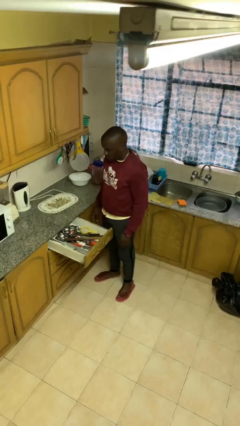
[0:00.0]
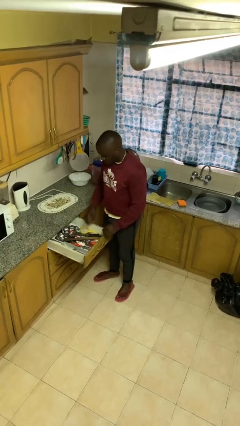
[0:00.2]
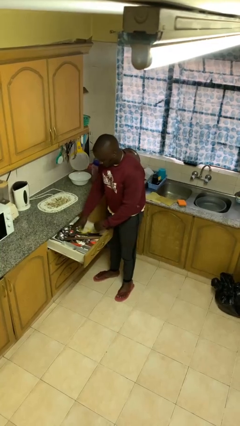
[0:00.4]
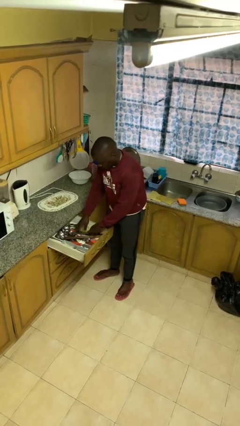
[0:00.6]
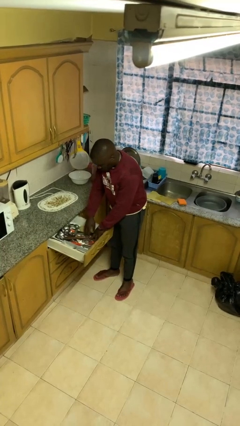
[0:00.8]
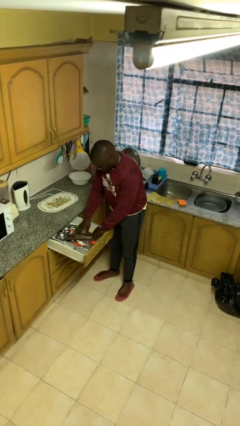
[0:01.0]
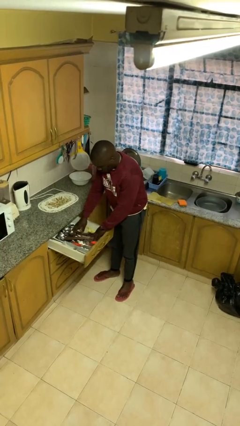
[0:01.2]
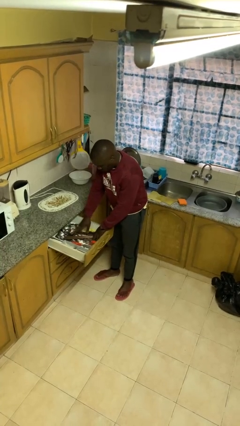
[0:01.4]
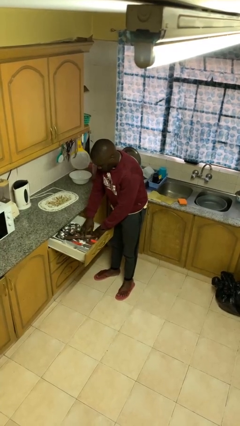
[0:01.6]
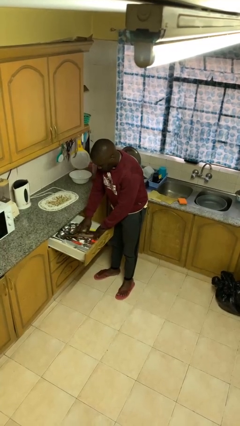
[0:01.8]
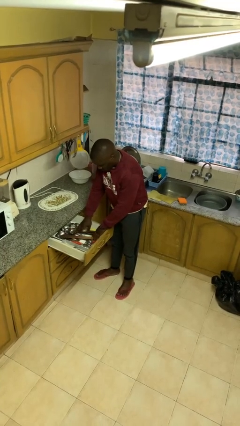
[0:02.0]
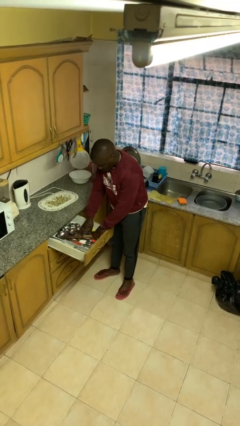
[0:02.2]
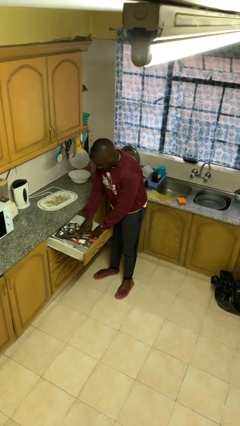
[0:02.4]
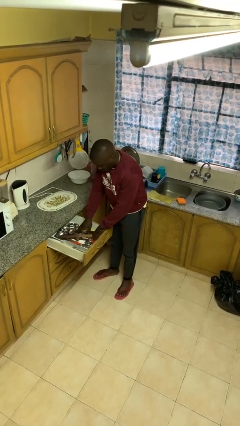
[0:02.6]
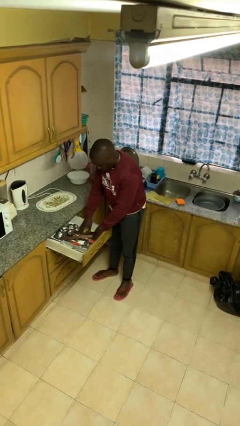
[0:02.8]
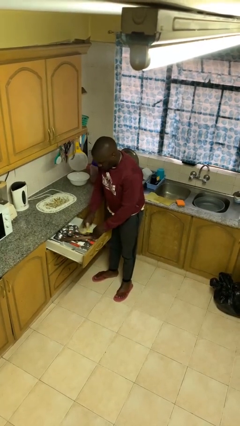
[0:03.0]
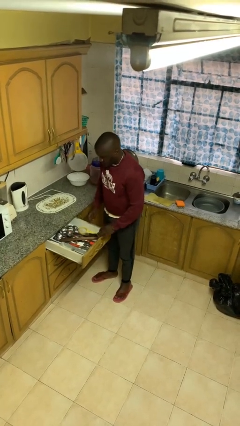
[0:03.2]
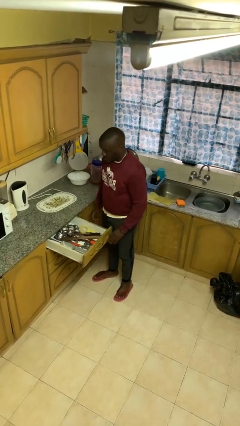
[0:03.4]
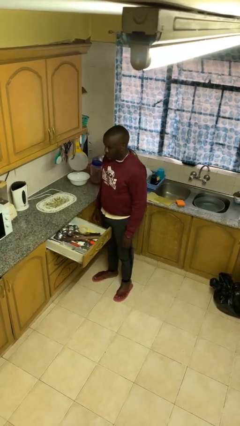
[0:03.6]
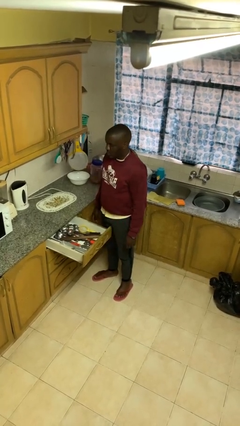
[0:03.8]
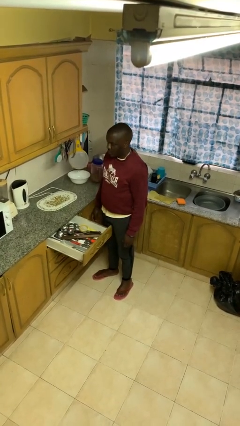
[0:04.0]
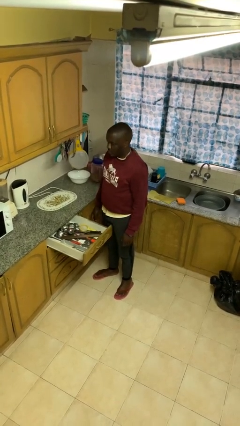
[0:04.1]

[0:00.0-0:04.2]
person searches in kitchen drawer

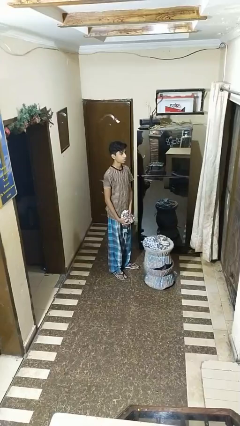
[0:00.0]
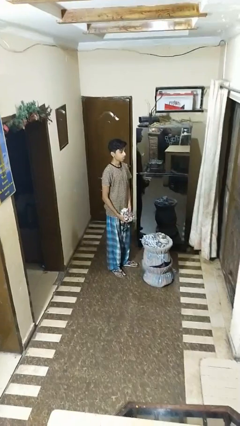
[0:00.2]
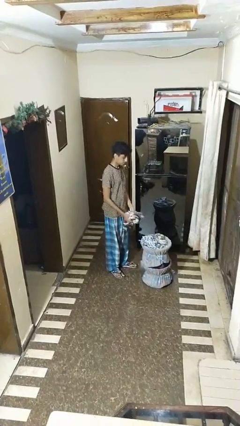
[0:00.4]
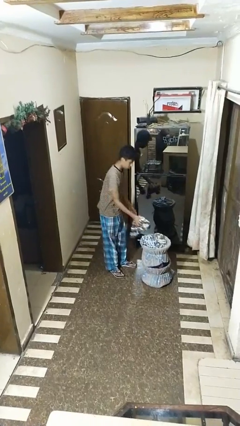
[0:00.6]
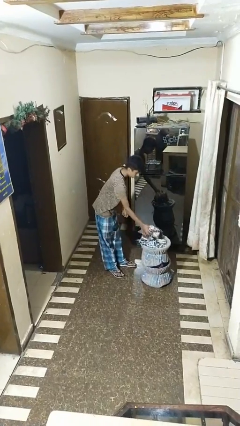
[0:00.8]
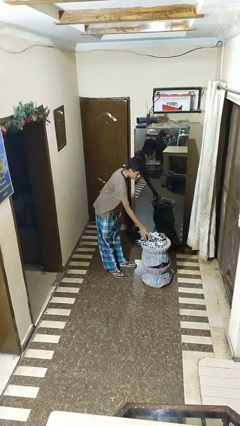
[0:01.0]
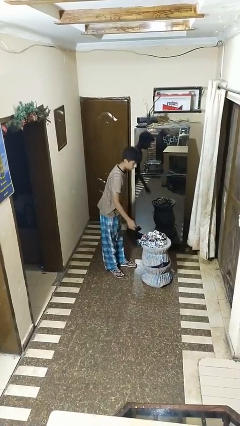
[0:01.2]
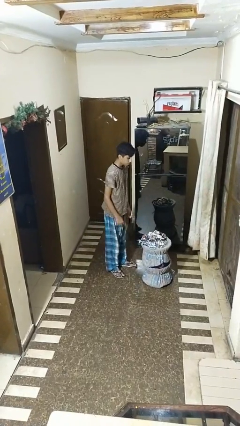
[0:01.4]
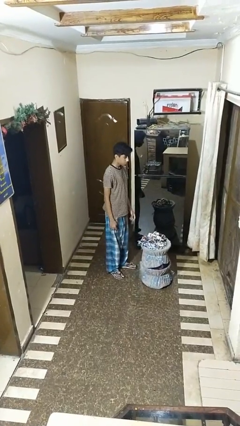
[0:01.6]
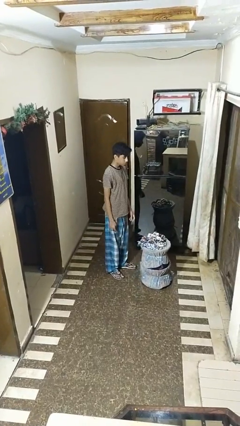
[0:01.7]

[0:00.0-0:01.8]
person puts object into basket

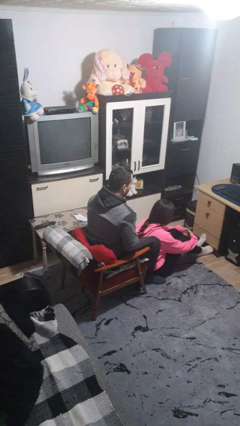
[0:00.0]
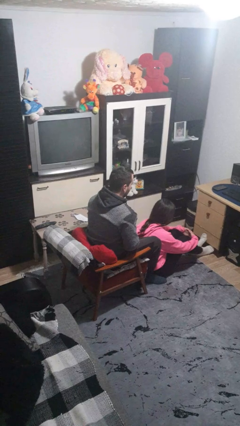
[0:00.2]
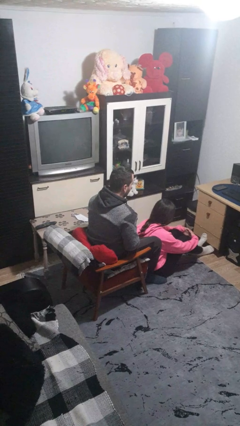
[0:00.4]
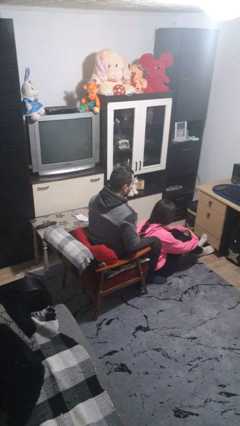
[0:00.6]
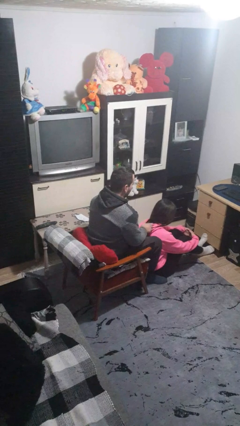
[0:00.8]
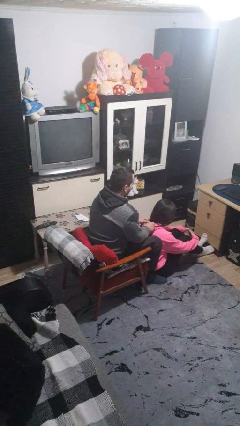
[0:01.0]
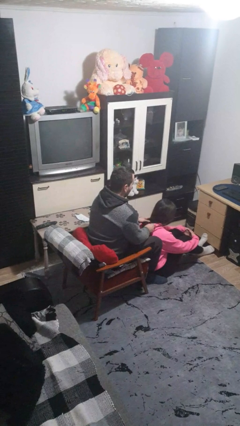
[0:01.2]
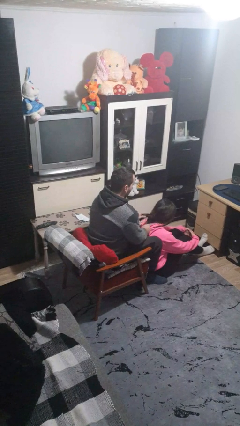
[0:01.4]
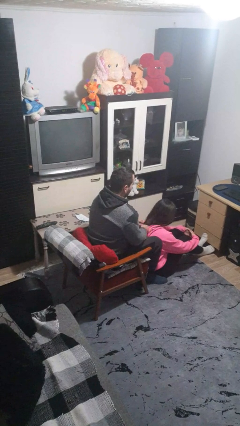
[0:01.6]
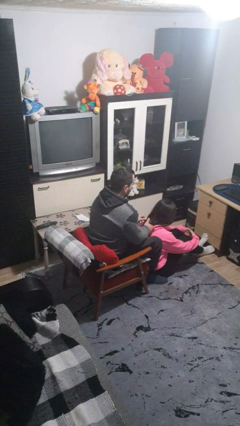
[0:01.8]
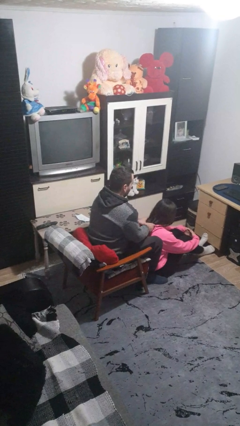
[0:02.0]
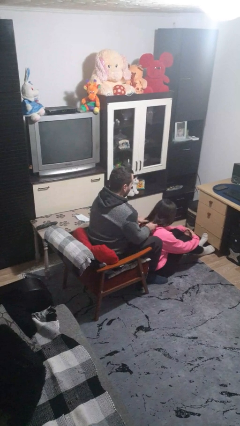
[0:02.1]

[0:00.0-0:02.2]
person braids hair of person

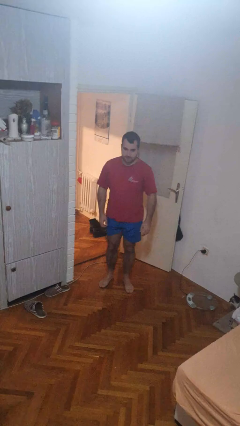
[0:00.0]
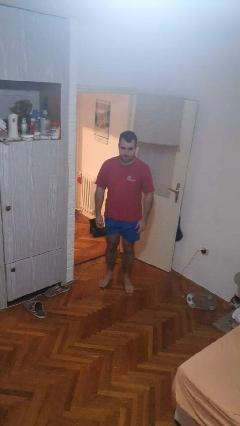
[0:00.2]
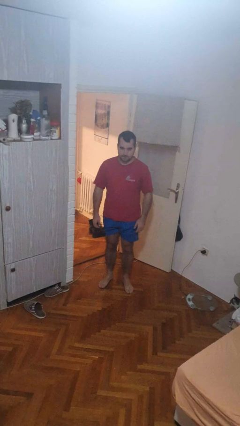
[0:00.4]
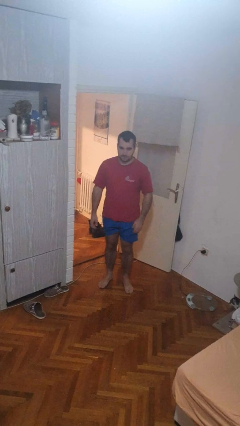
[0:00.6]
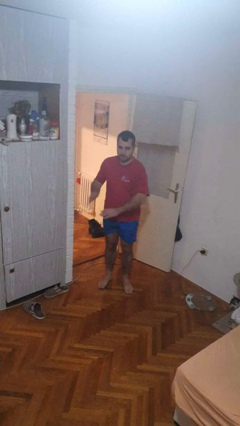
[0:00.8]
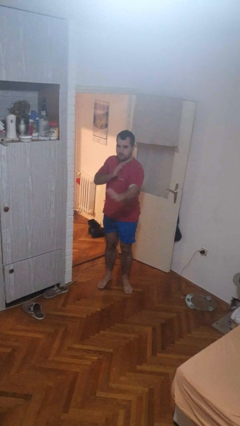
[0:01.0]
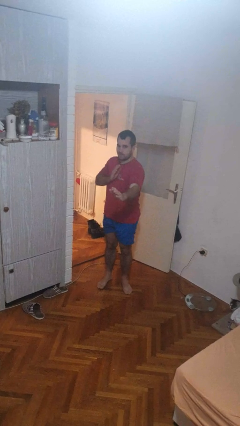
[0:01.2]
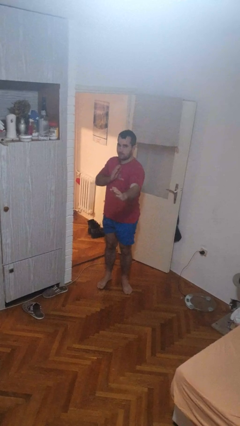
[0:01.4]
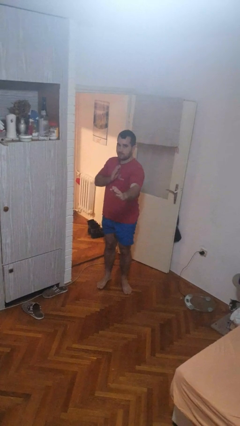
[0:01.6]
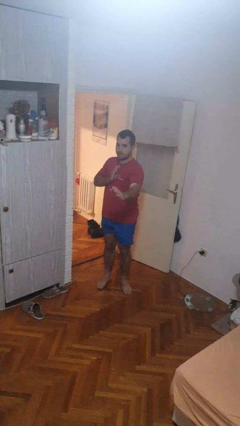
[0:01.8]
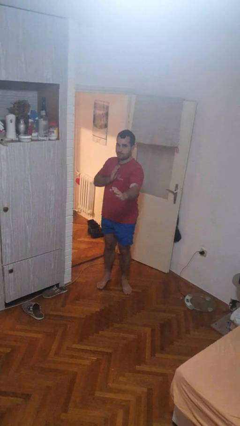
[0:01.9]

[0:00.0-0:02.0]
person karate chop

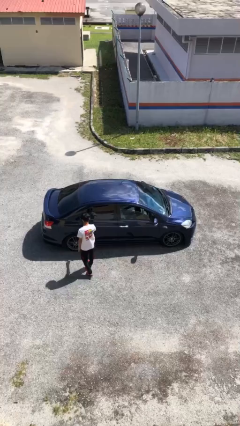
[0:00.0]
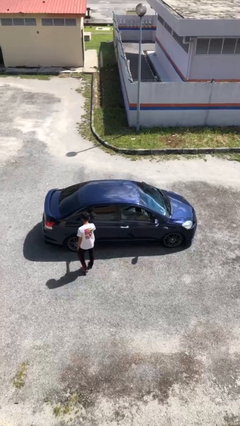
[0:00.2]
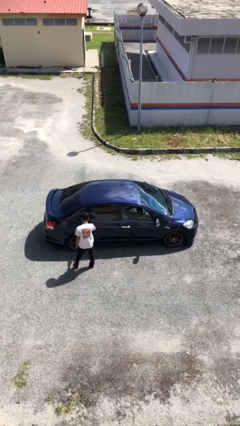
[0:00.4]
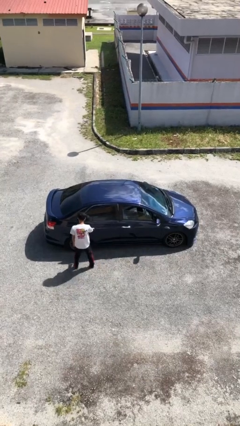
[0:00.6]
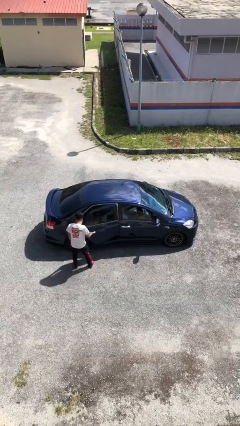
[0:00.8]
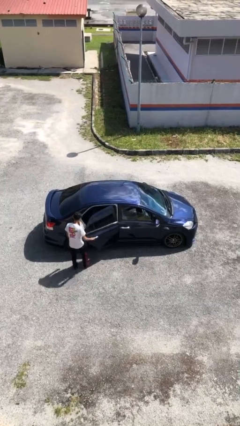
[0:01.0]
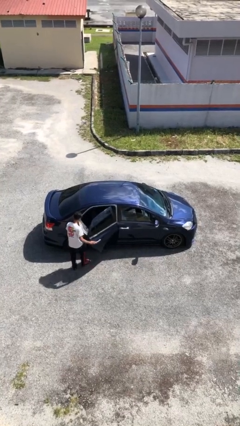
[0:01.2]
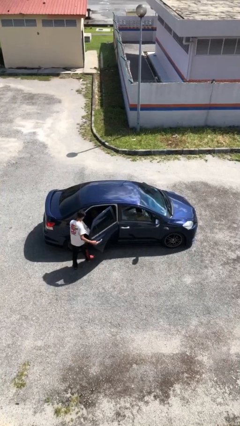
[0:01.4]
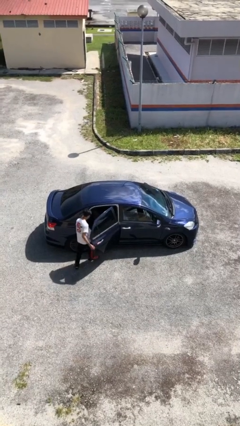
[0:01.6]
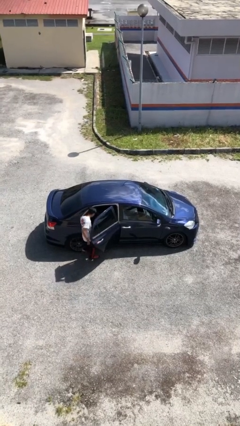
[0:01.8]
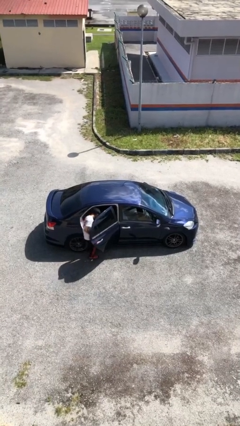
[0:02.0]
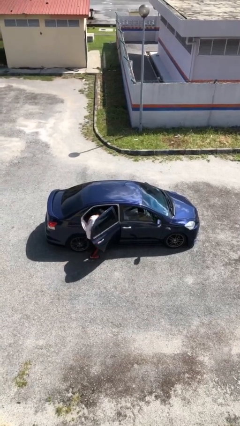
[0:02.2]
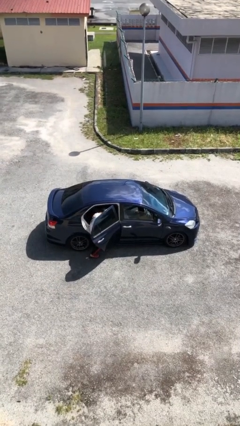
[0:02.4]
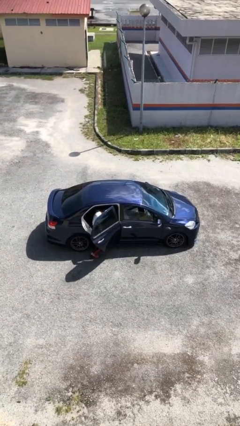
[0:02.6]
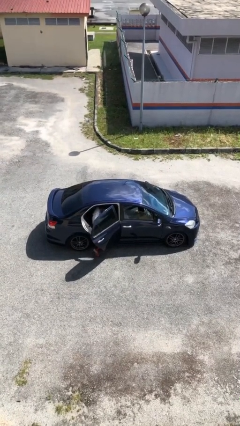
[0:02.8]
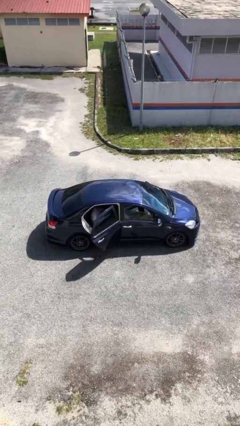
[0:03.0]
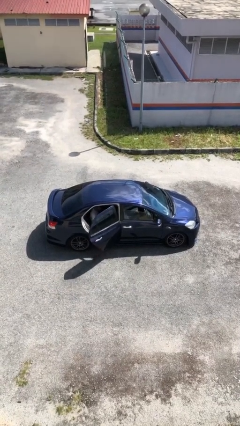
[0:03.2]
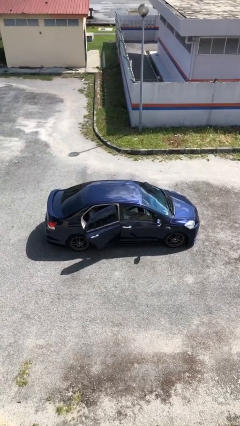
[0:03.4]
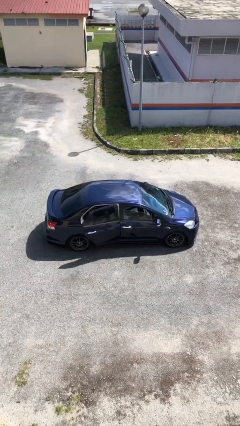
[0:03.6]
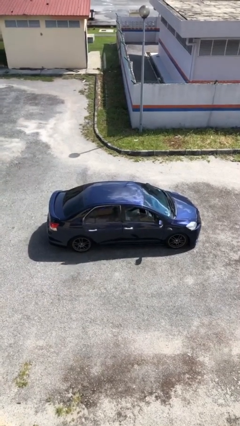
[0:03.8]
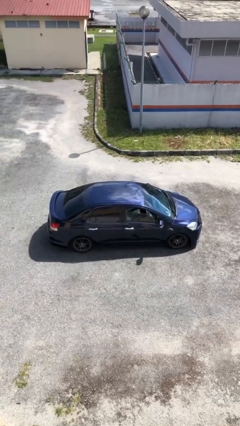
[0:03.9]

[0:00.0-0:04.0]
car picks up person

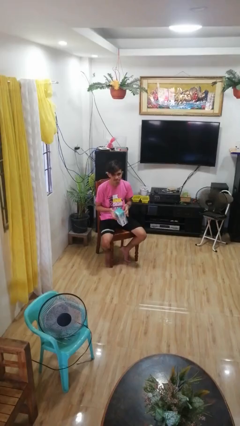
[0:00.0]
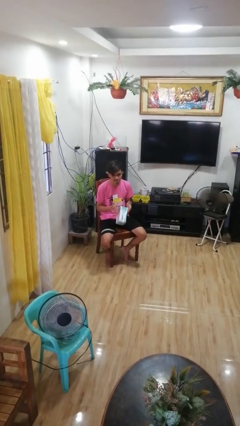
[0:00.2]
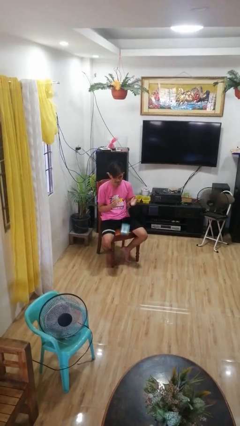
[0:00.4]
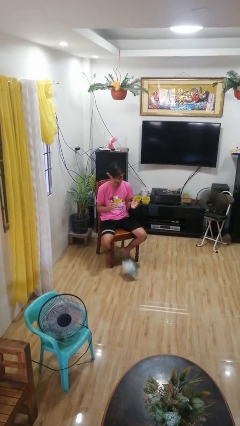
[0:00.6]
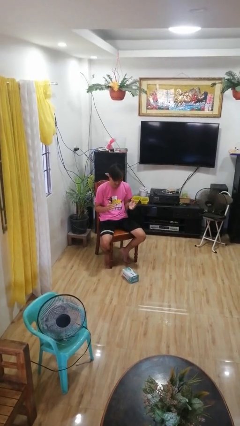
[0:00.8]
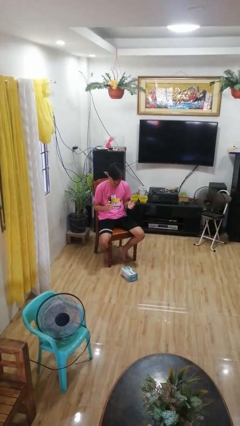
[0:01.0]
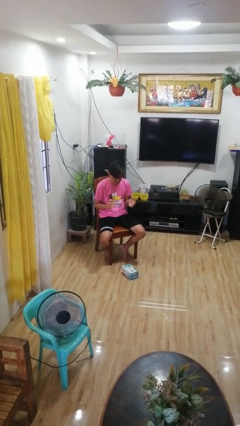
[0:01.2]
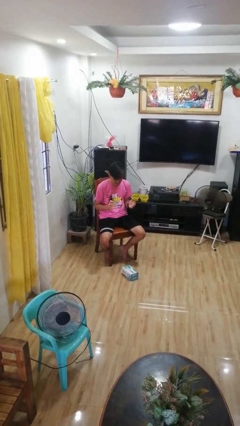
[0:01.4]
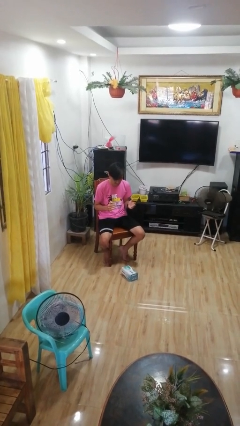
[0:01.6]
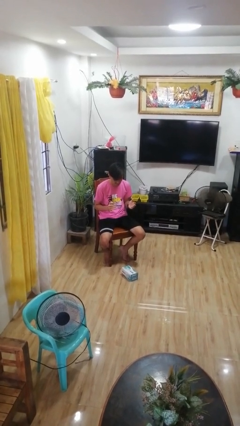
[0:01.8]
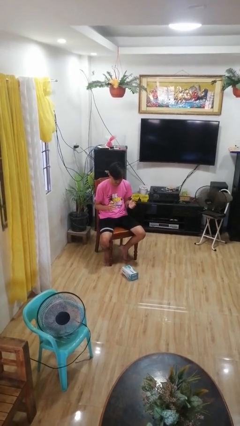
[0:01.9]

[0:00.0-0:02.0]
person drops object

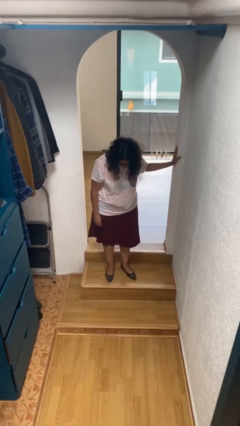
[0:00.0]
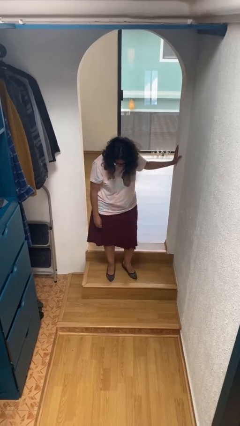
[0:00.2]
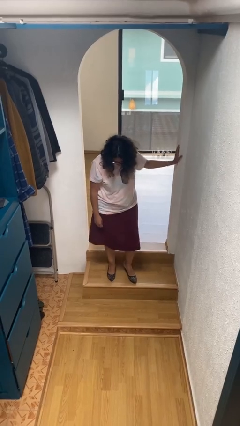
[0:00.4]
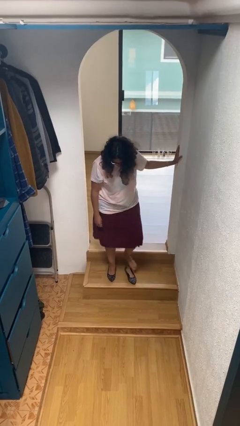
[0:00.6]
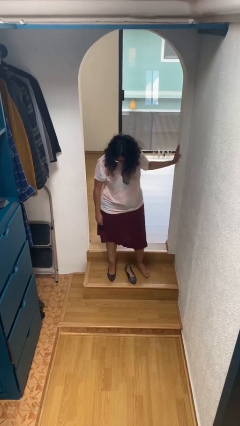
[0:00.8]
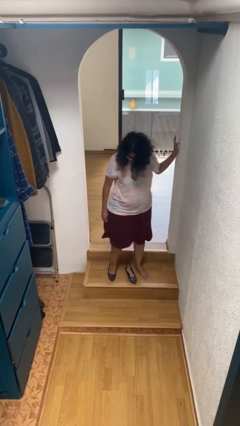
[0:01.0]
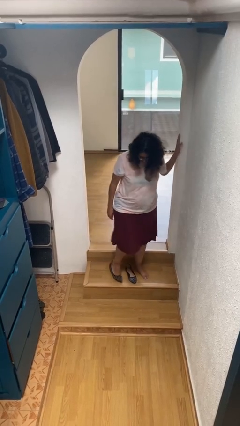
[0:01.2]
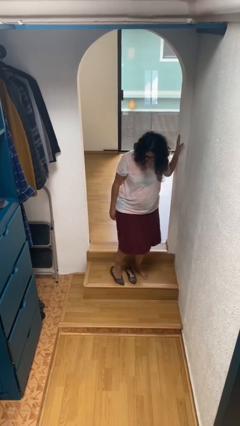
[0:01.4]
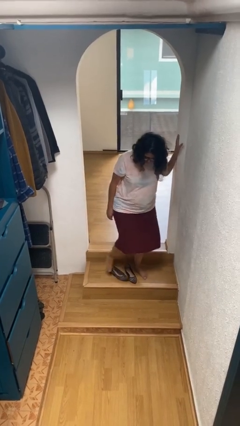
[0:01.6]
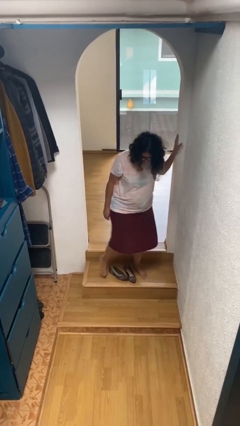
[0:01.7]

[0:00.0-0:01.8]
person takes off shoes
